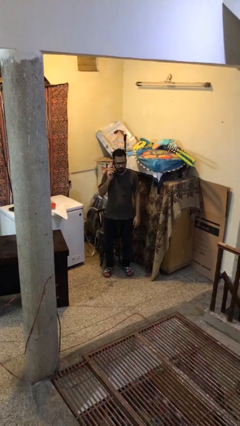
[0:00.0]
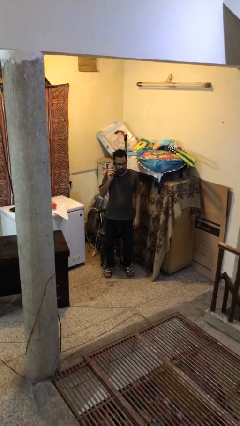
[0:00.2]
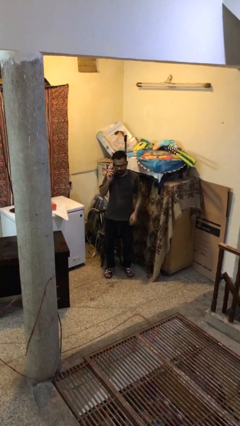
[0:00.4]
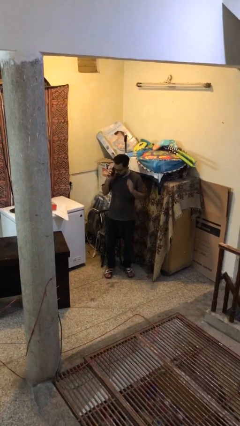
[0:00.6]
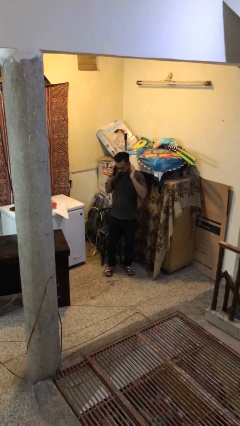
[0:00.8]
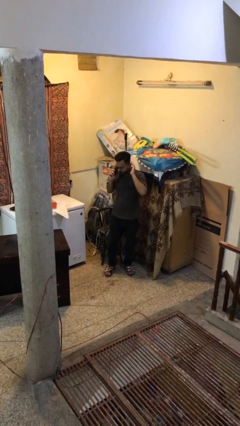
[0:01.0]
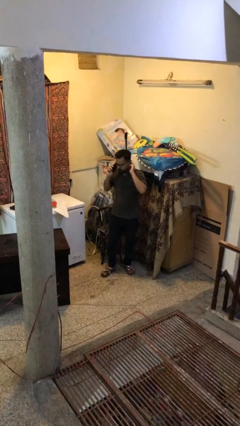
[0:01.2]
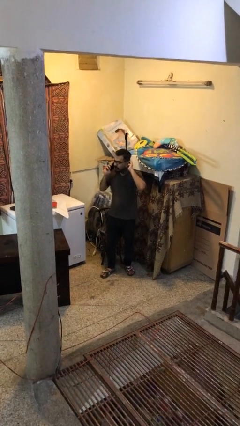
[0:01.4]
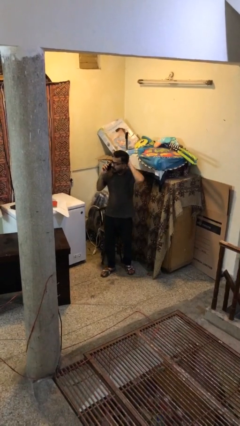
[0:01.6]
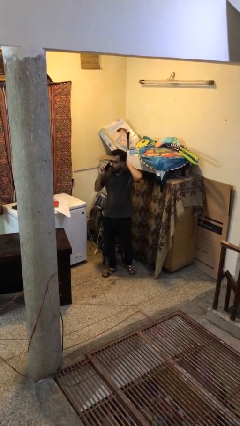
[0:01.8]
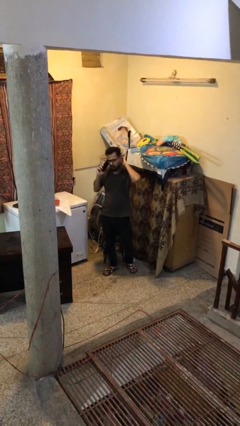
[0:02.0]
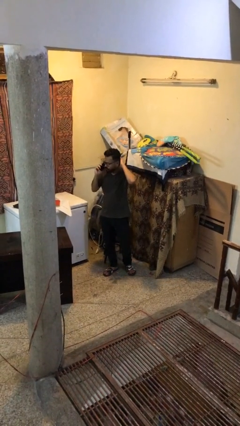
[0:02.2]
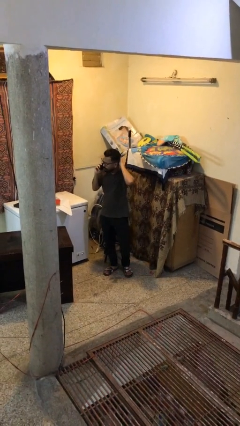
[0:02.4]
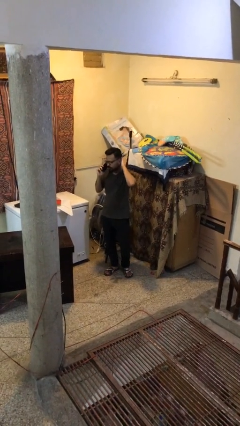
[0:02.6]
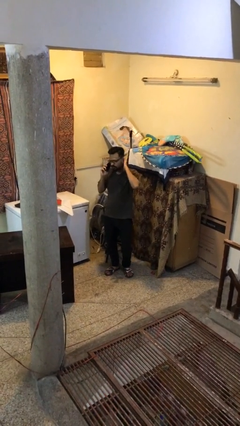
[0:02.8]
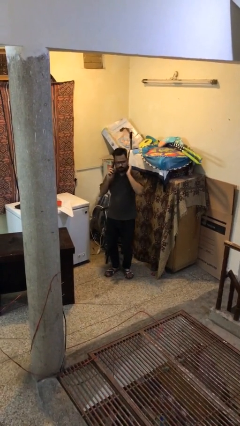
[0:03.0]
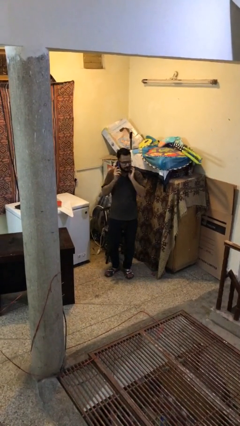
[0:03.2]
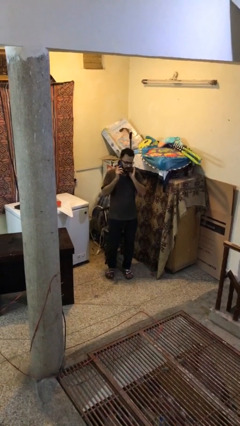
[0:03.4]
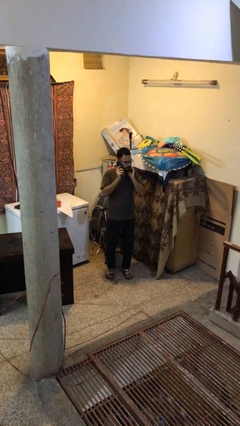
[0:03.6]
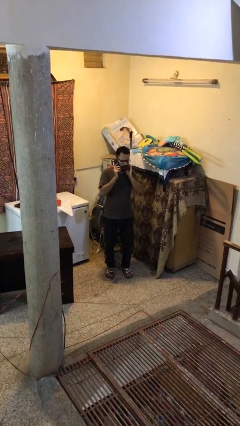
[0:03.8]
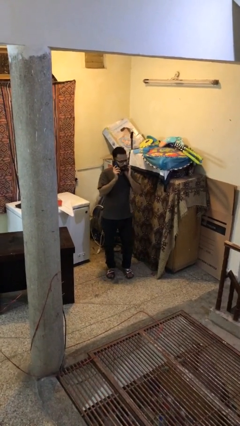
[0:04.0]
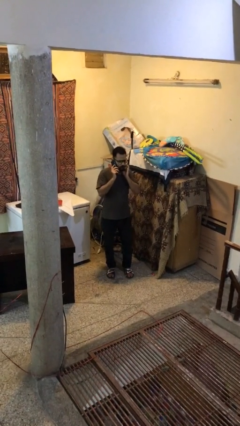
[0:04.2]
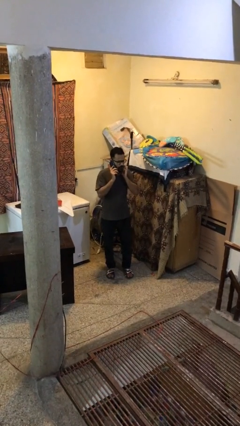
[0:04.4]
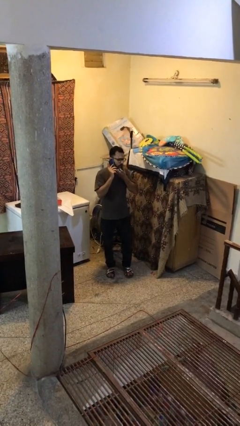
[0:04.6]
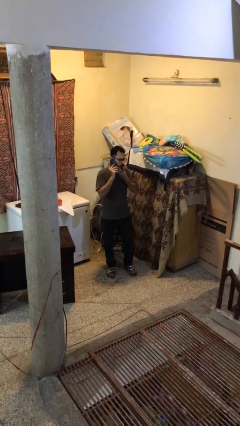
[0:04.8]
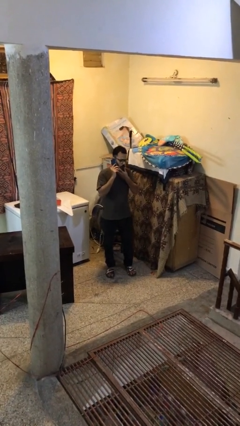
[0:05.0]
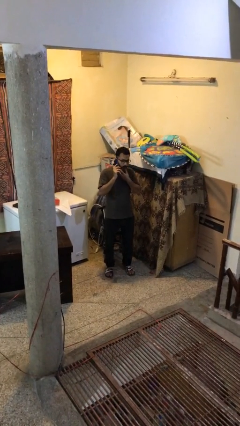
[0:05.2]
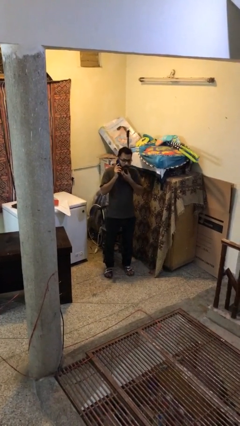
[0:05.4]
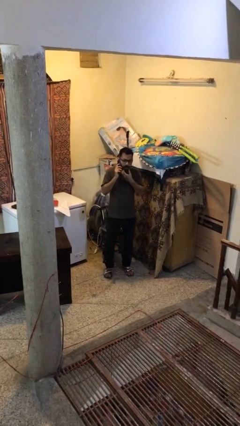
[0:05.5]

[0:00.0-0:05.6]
person talks on phone

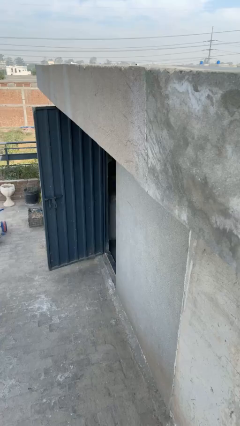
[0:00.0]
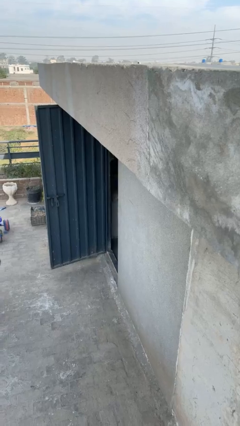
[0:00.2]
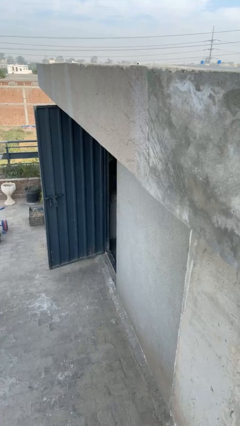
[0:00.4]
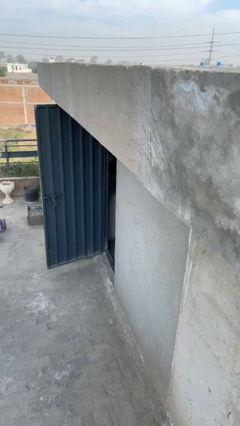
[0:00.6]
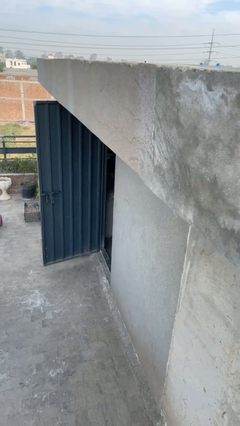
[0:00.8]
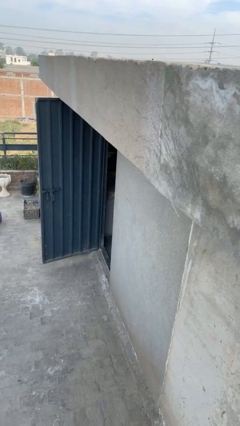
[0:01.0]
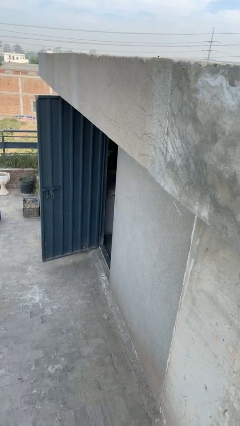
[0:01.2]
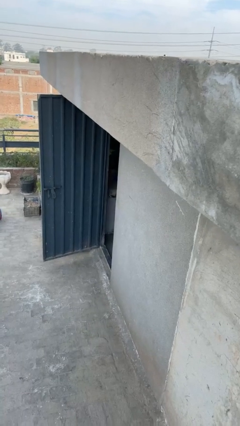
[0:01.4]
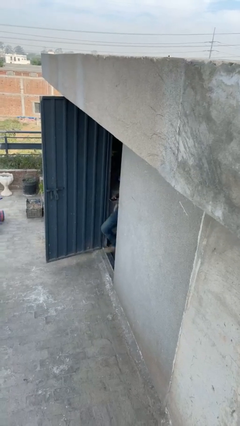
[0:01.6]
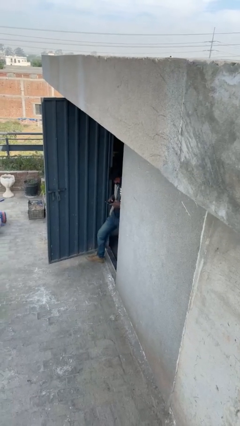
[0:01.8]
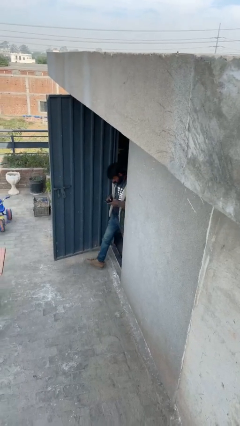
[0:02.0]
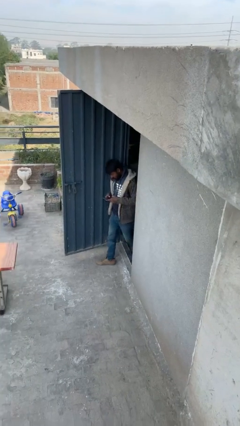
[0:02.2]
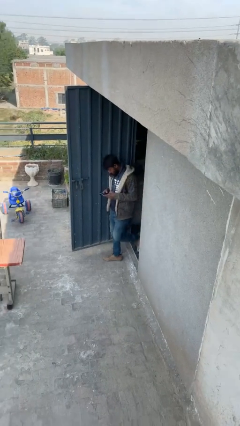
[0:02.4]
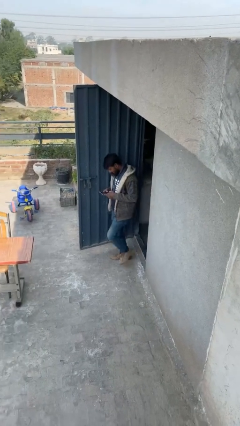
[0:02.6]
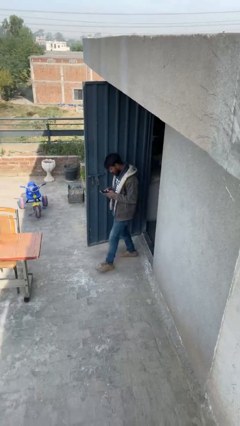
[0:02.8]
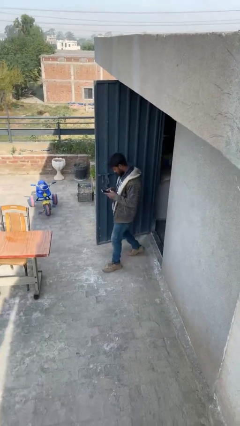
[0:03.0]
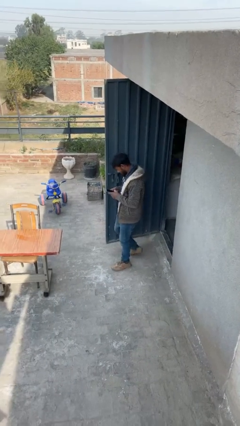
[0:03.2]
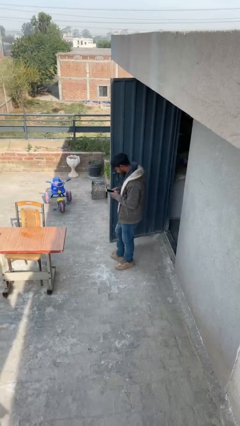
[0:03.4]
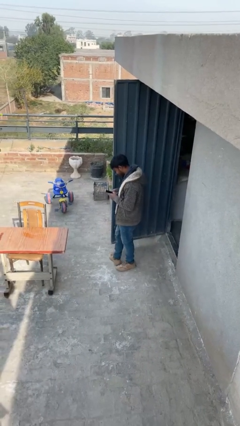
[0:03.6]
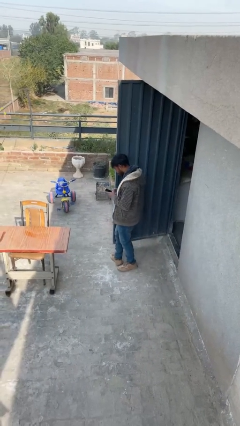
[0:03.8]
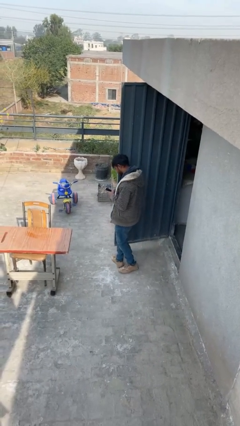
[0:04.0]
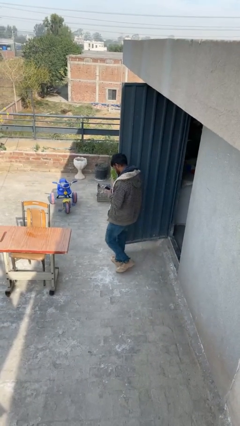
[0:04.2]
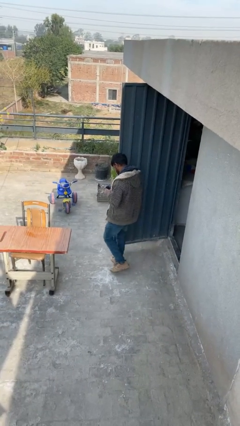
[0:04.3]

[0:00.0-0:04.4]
person enters scene through structure

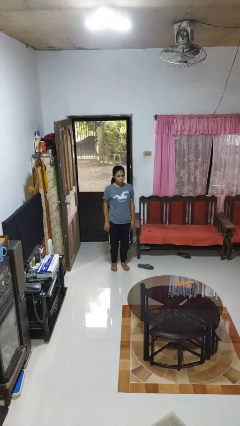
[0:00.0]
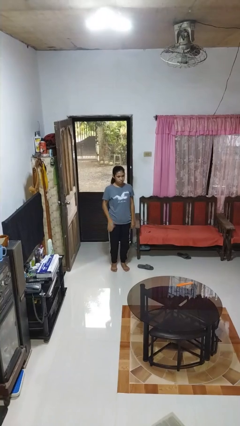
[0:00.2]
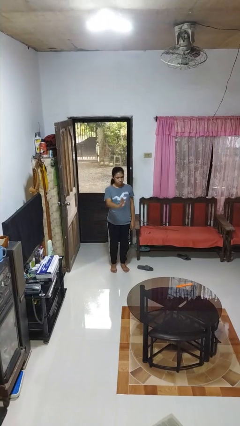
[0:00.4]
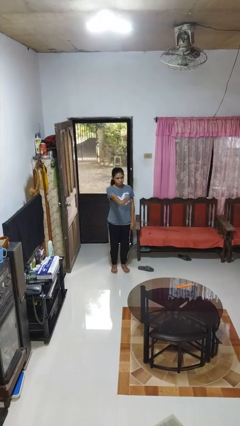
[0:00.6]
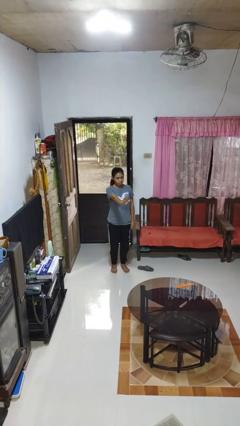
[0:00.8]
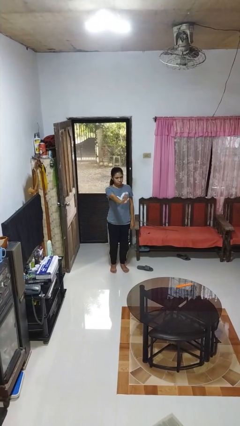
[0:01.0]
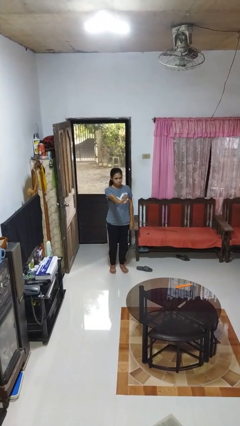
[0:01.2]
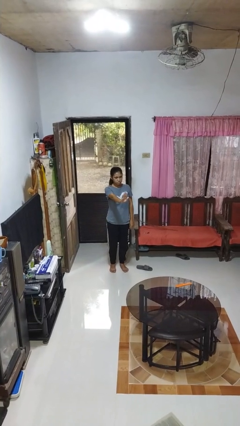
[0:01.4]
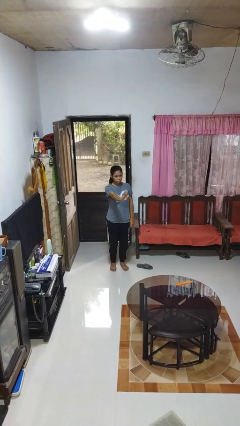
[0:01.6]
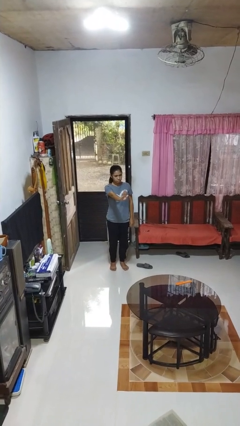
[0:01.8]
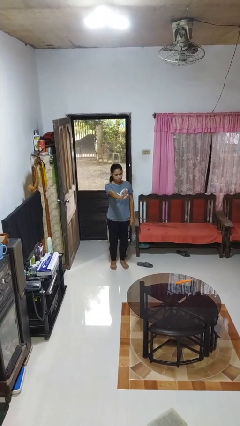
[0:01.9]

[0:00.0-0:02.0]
person gestures stop

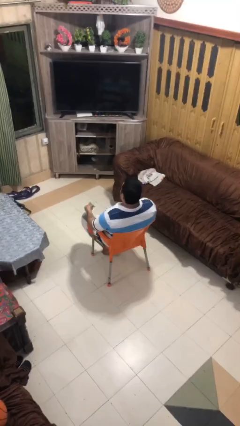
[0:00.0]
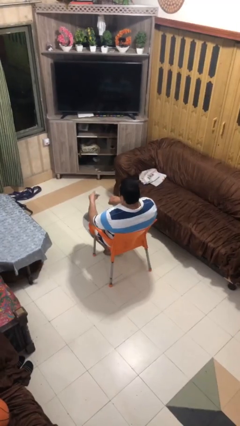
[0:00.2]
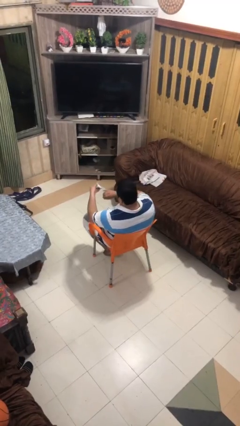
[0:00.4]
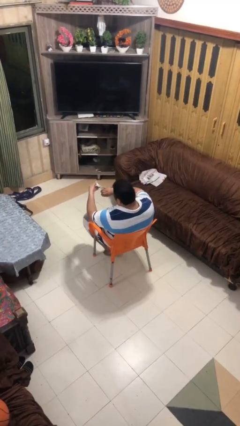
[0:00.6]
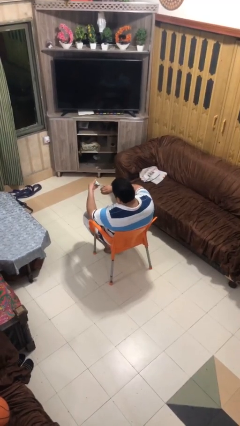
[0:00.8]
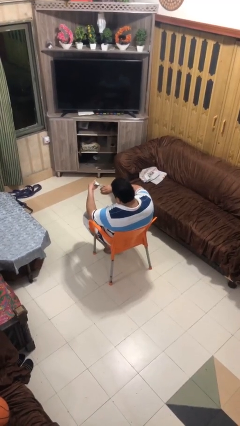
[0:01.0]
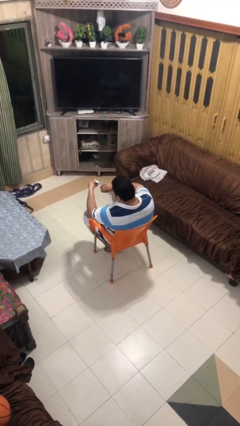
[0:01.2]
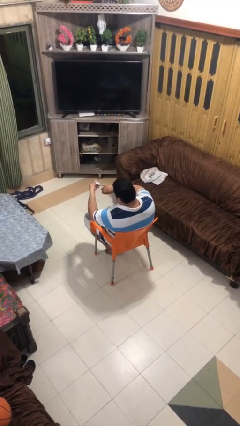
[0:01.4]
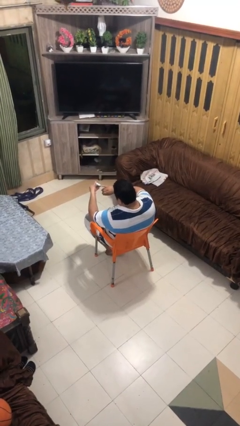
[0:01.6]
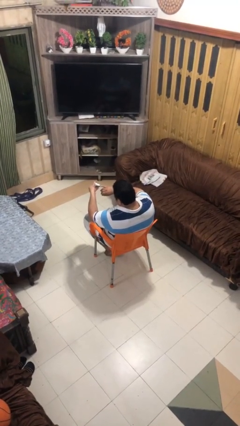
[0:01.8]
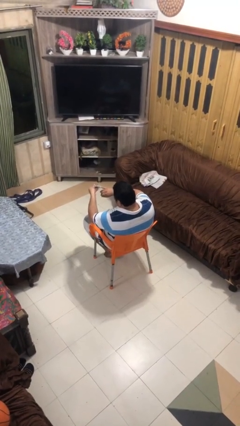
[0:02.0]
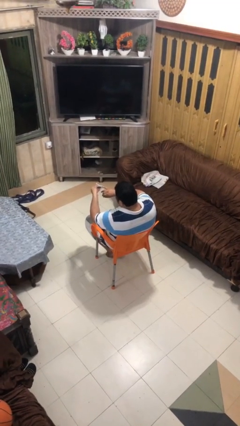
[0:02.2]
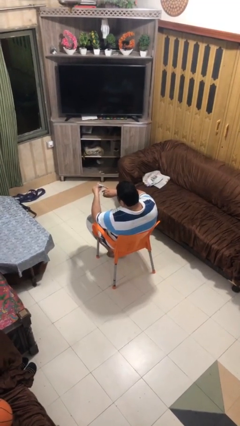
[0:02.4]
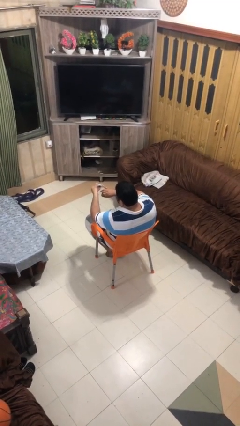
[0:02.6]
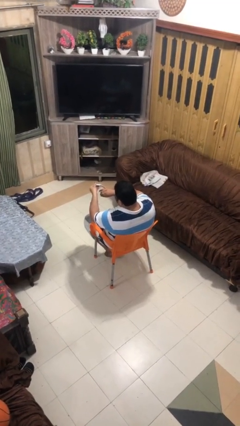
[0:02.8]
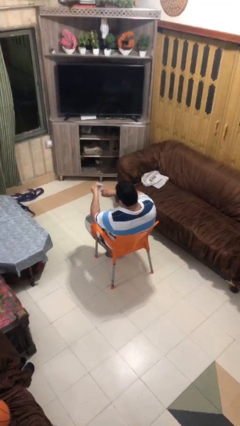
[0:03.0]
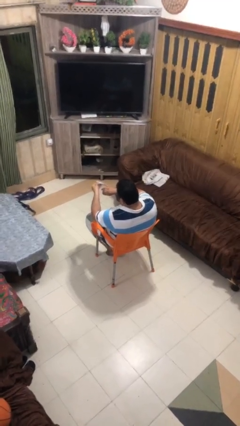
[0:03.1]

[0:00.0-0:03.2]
person clips fingernails

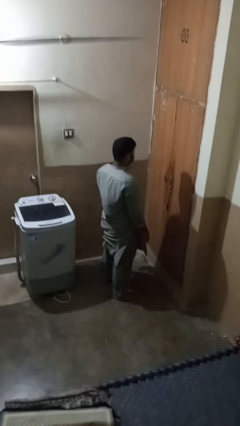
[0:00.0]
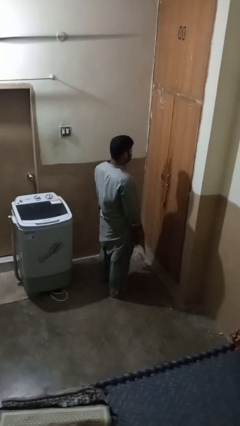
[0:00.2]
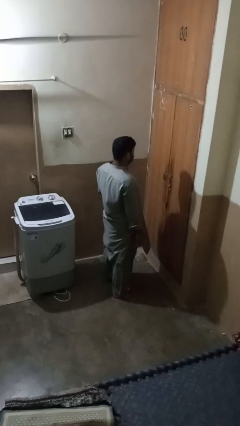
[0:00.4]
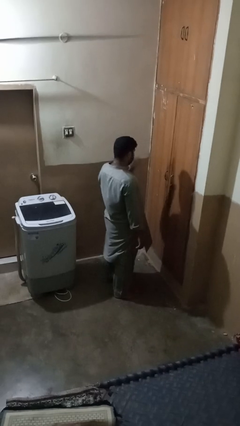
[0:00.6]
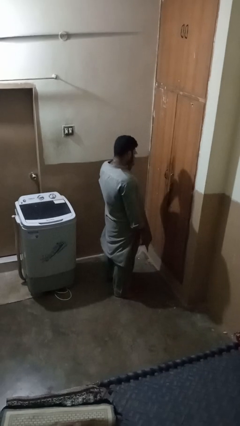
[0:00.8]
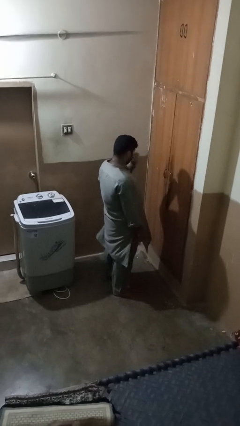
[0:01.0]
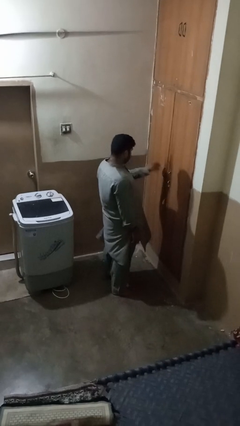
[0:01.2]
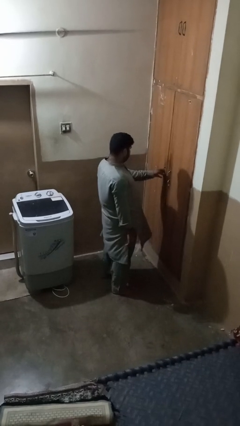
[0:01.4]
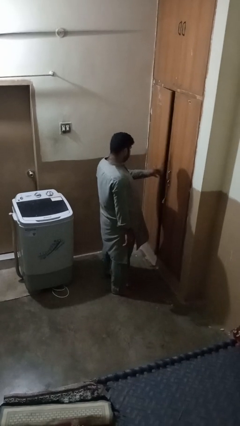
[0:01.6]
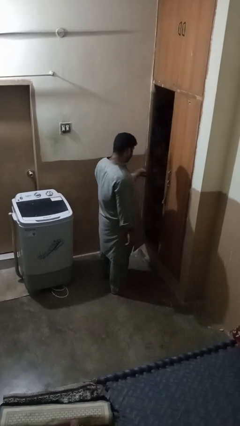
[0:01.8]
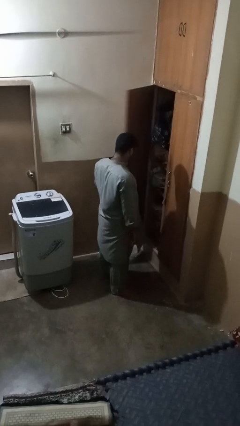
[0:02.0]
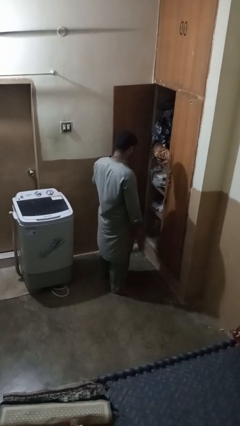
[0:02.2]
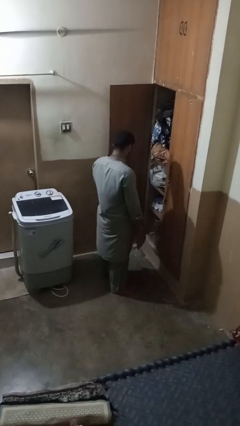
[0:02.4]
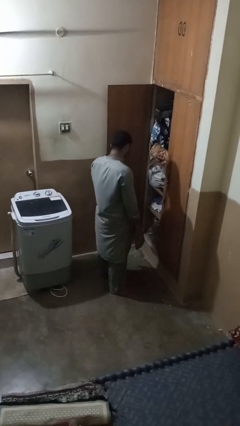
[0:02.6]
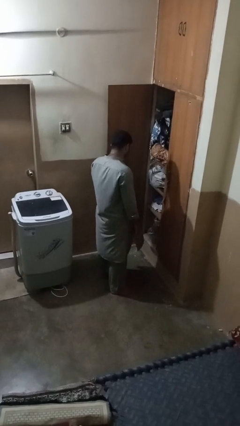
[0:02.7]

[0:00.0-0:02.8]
person opens closet door
